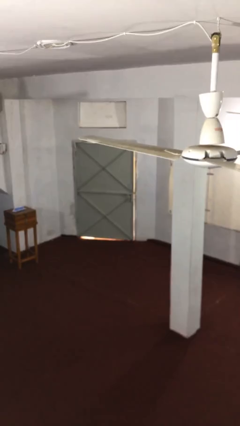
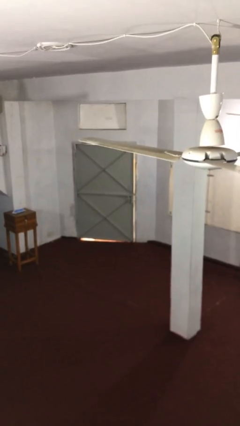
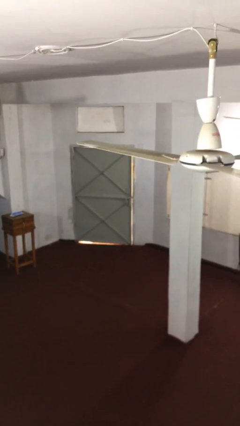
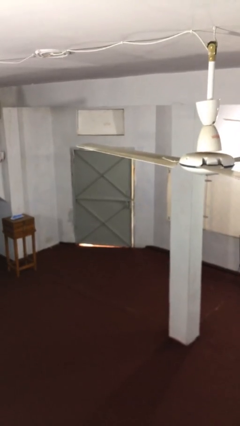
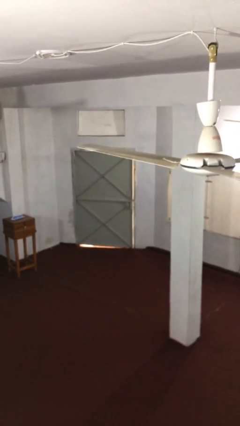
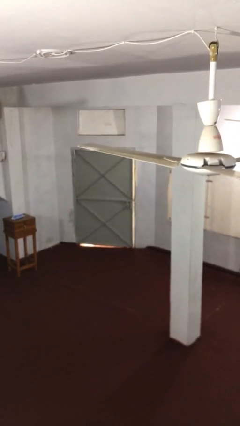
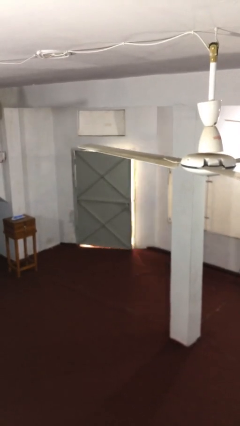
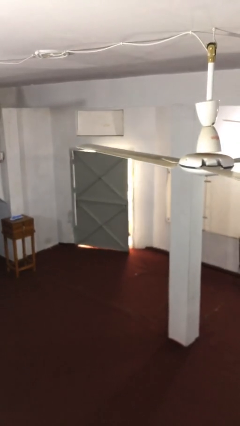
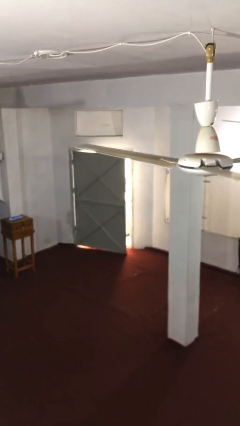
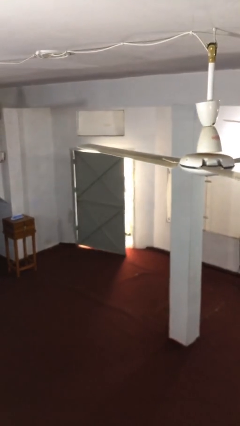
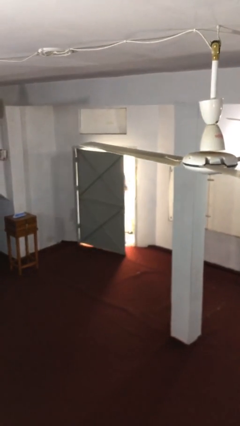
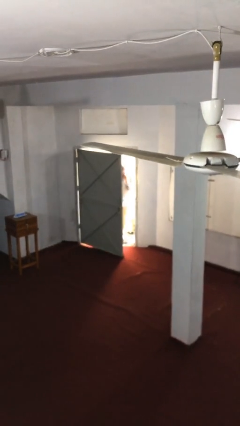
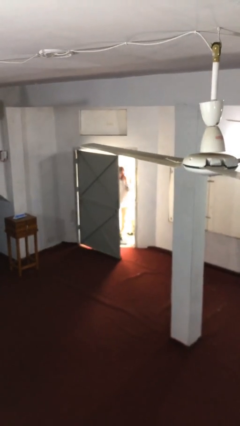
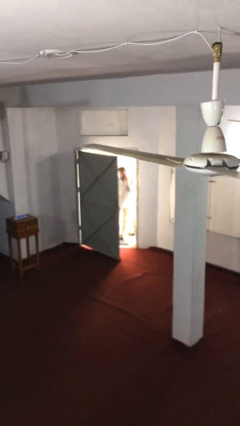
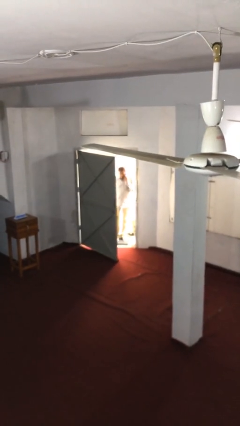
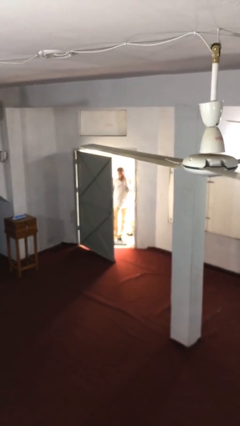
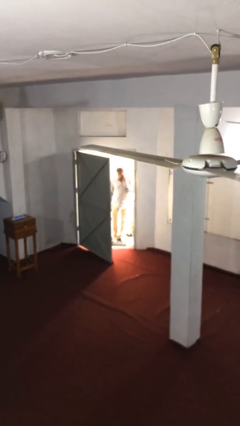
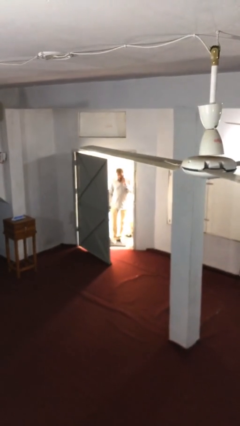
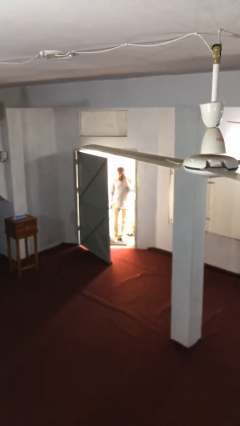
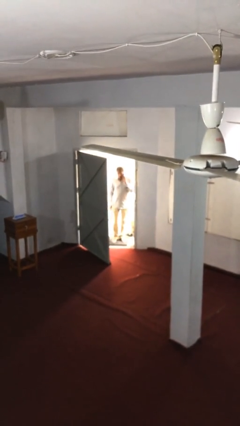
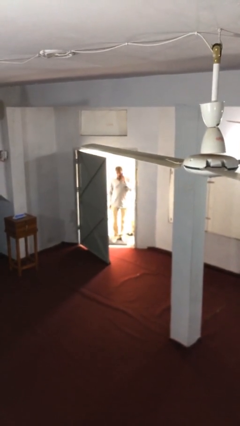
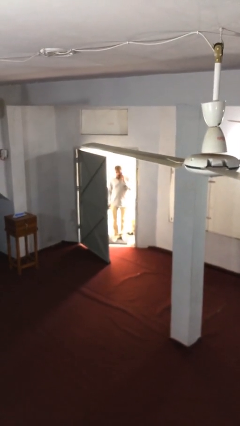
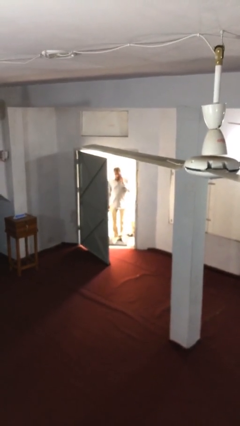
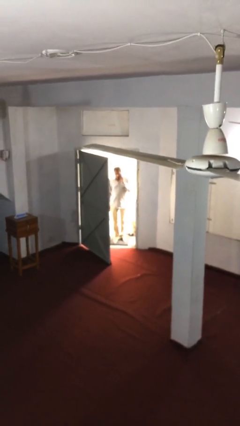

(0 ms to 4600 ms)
person opens facility door

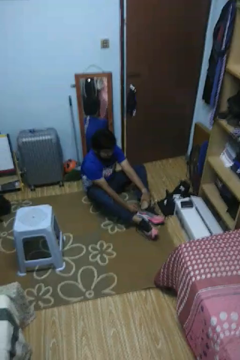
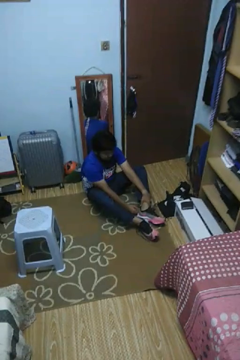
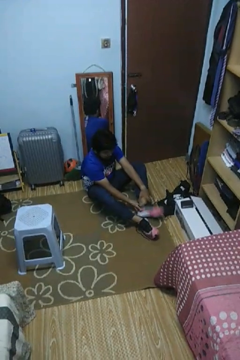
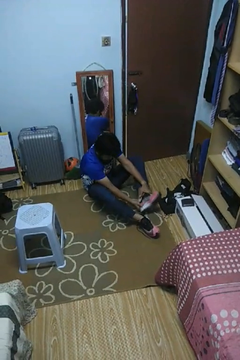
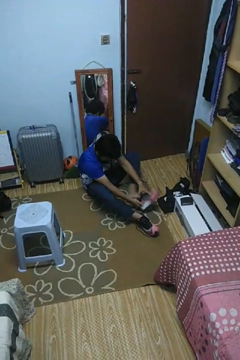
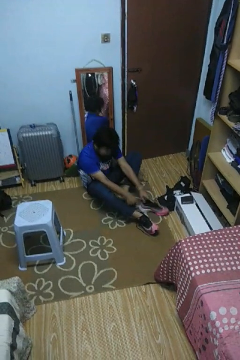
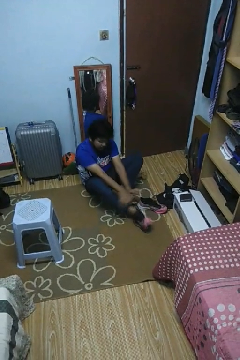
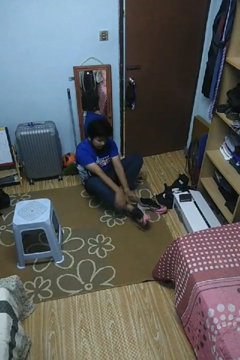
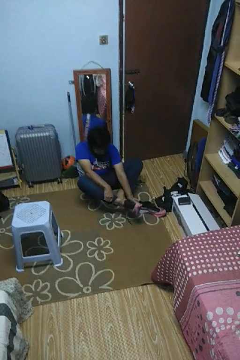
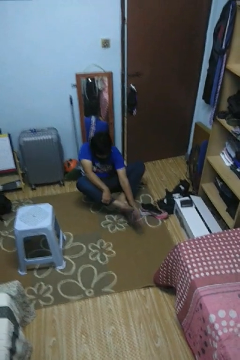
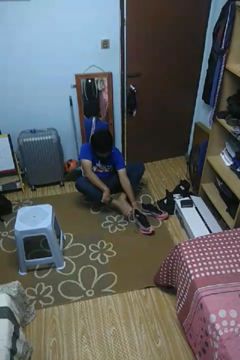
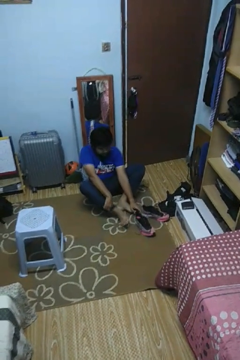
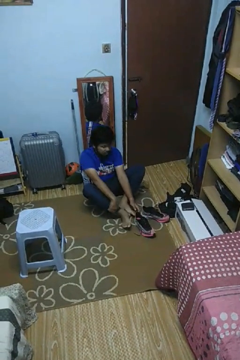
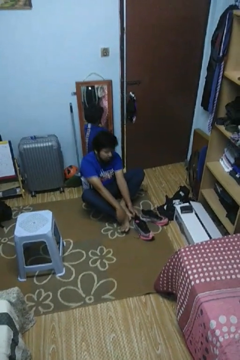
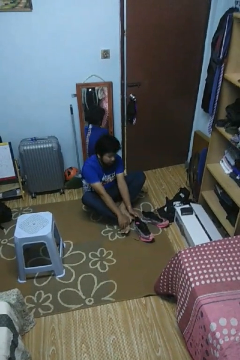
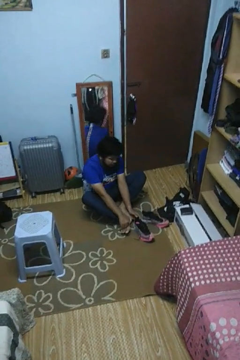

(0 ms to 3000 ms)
person takes off shoes

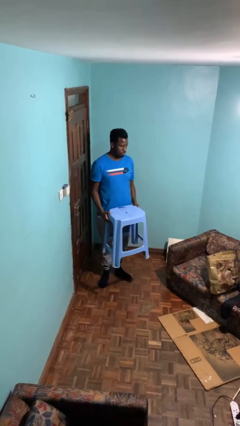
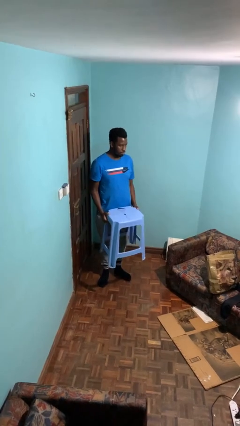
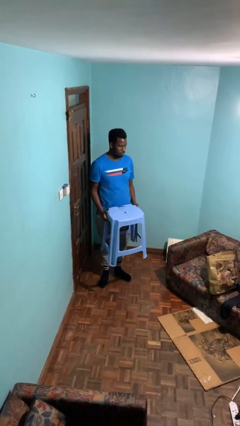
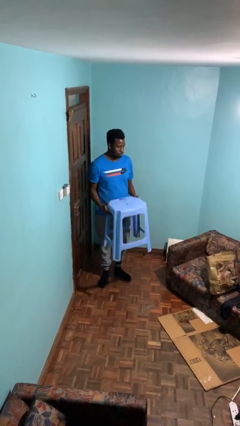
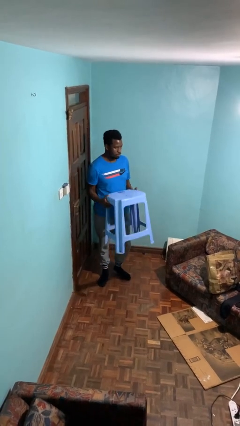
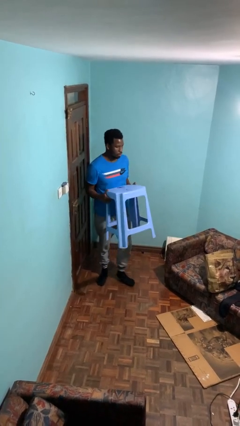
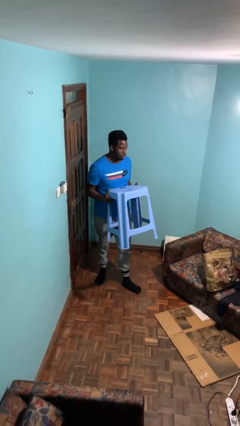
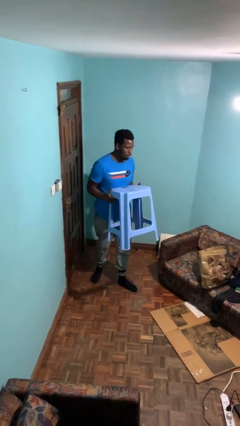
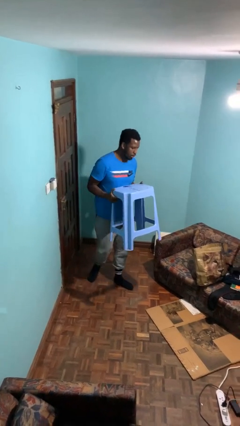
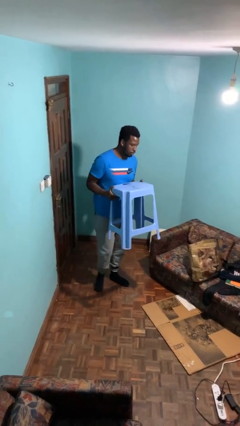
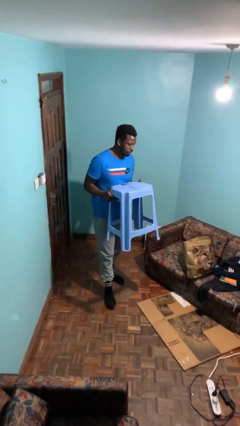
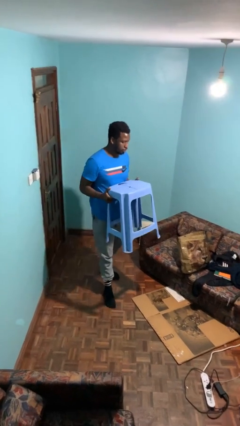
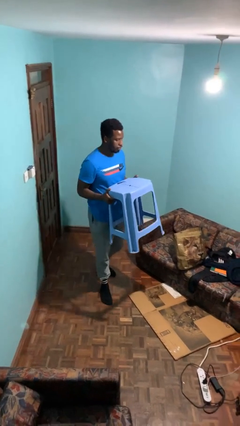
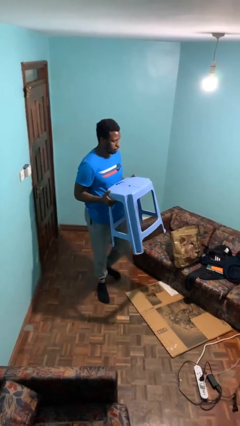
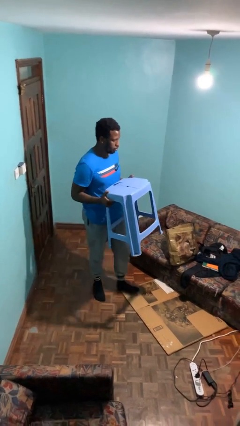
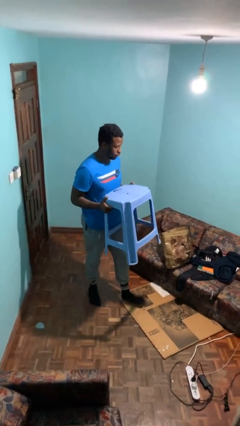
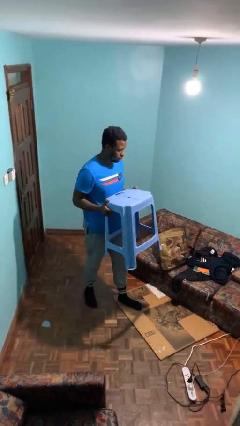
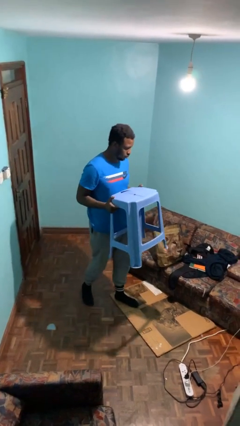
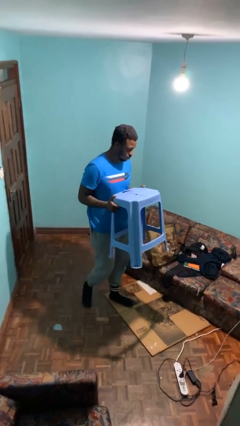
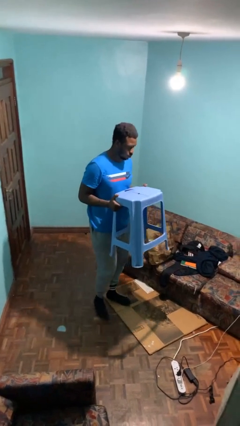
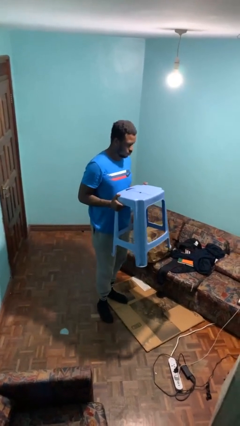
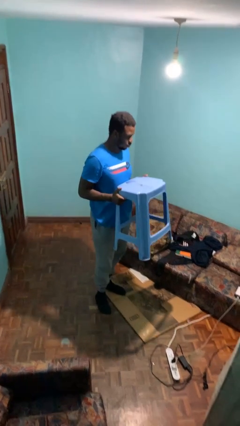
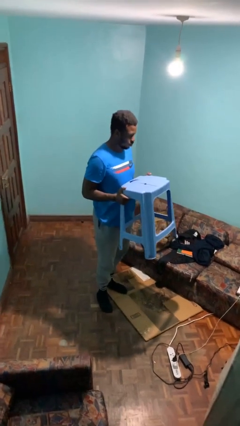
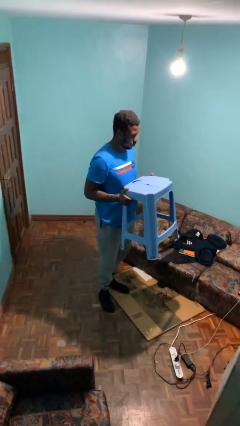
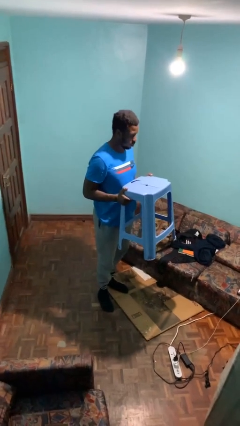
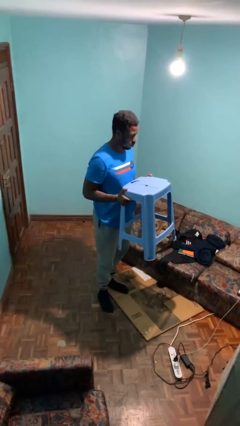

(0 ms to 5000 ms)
person carries furniture

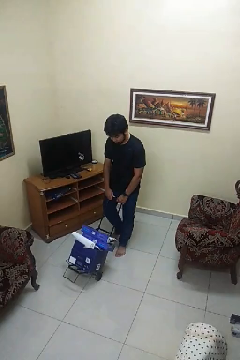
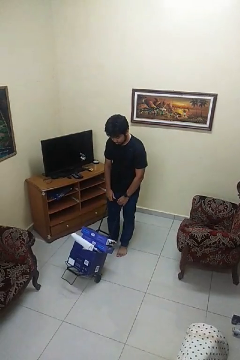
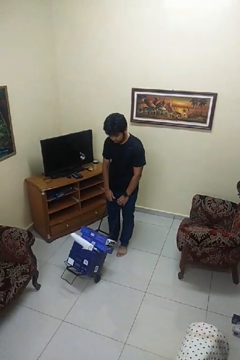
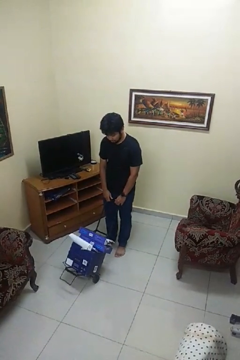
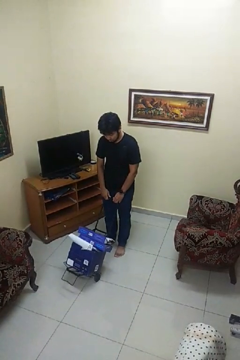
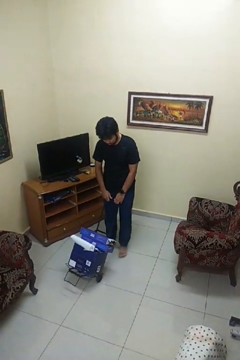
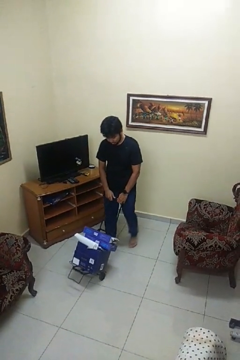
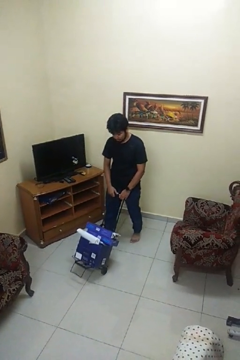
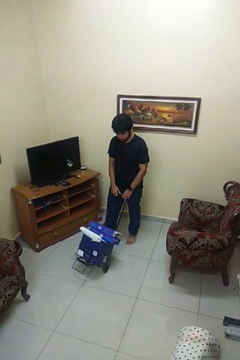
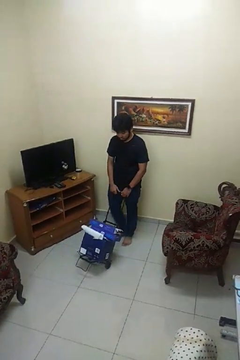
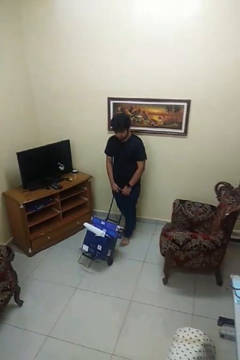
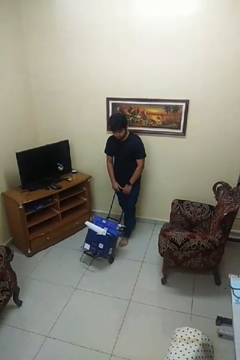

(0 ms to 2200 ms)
person pulls wheeled cart

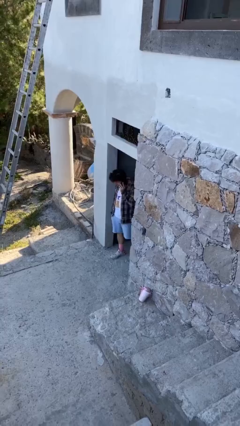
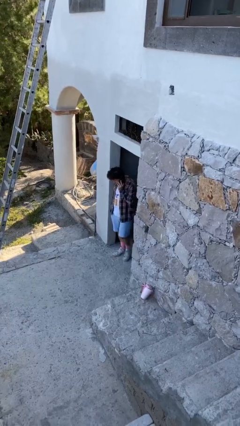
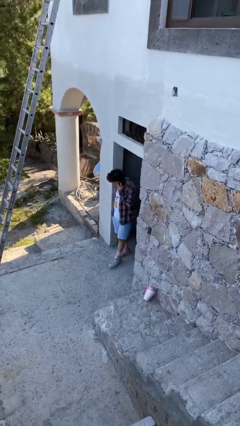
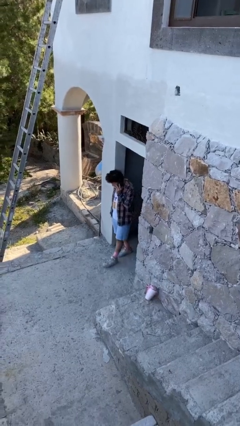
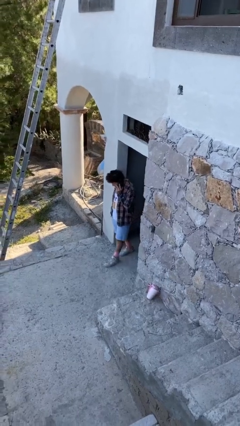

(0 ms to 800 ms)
person enters scene through structure

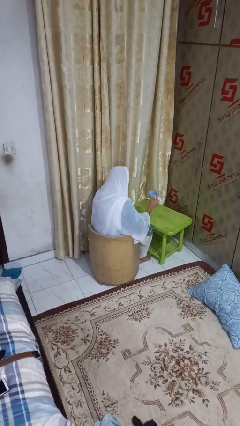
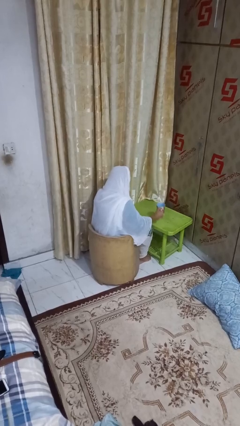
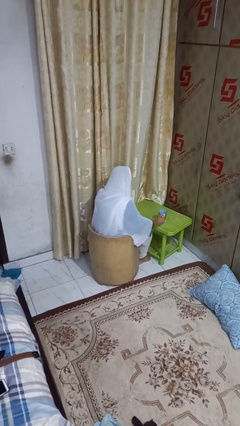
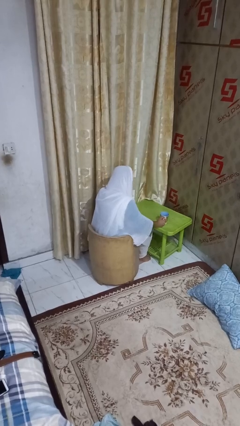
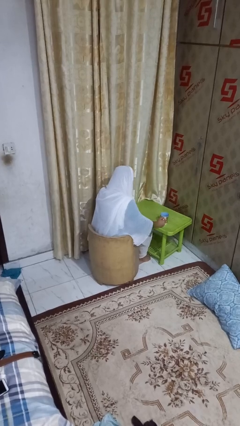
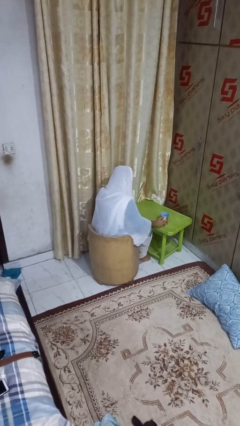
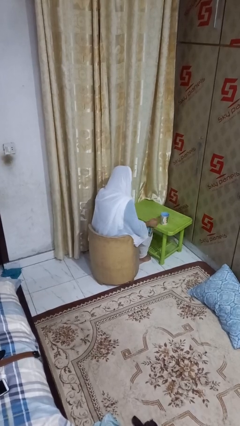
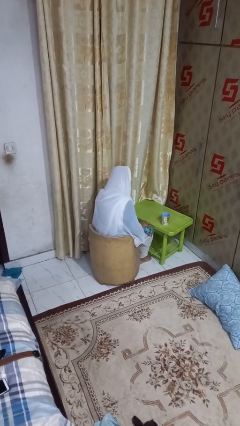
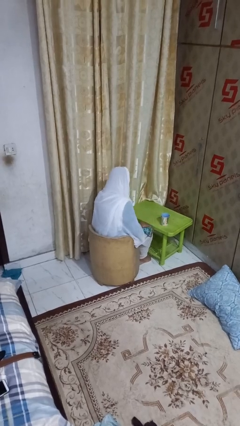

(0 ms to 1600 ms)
person puts down object on table

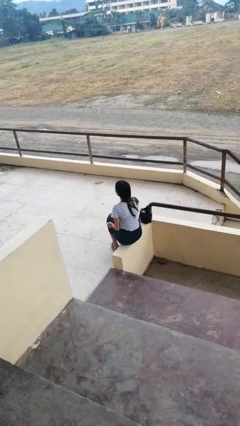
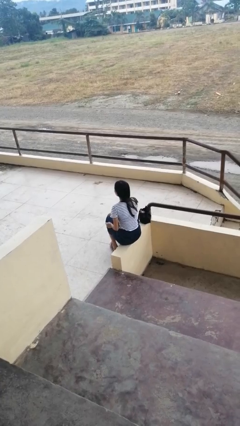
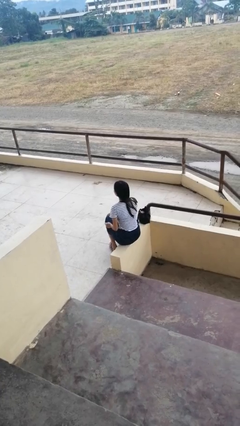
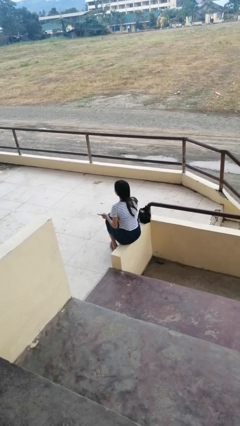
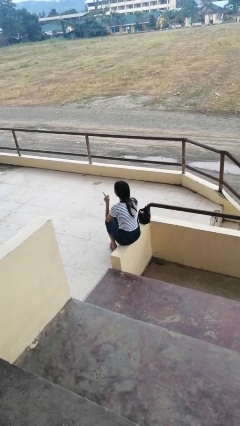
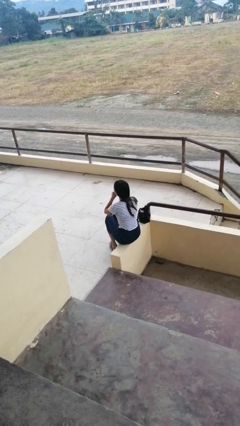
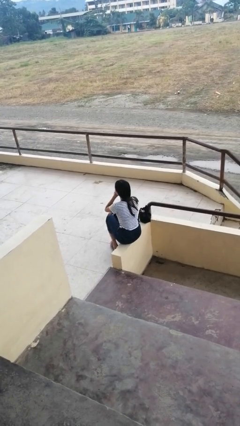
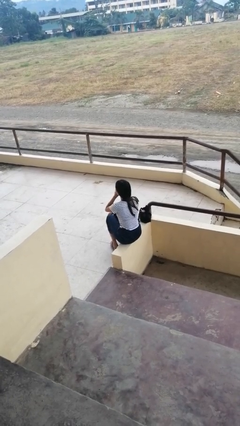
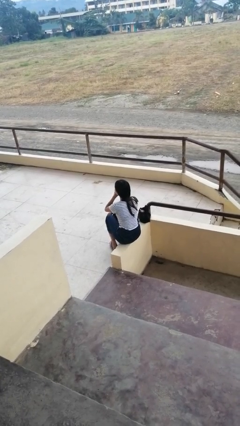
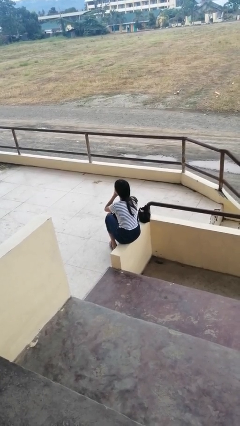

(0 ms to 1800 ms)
person gestures be quiet
